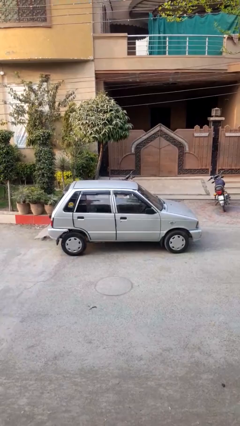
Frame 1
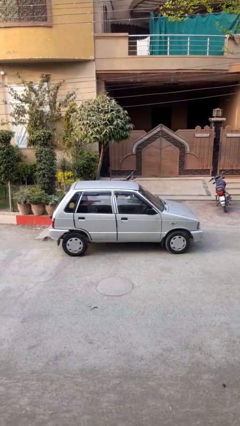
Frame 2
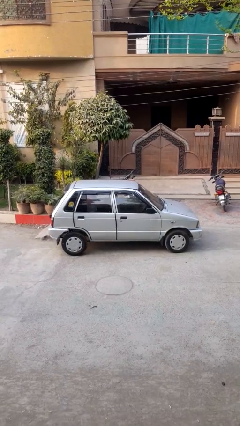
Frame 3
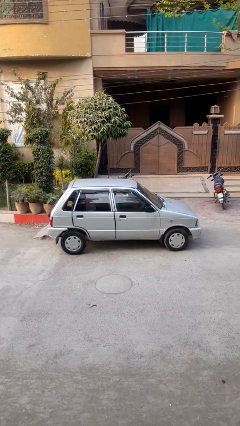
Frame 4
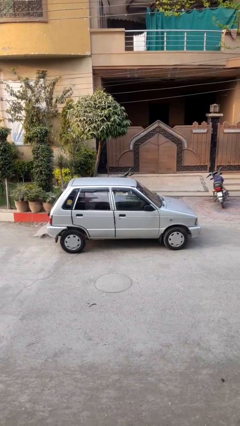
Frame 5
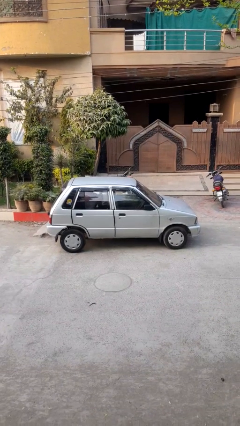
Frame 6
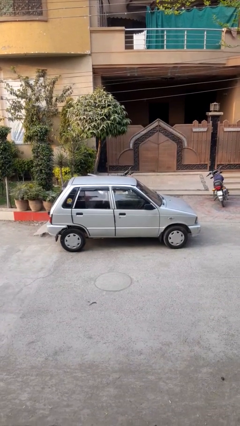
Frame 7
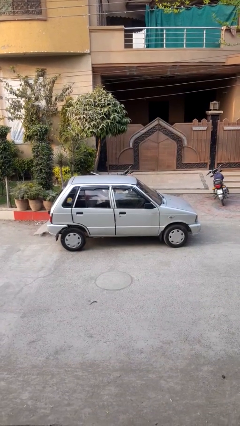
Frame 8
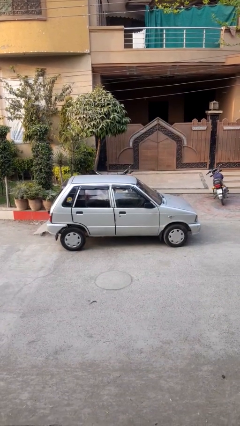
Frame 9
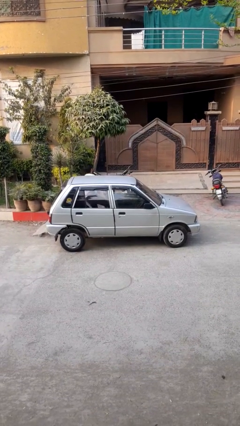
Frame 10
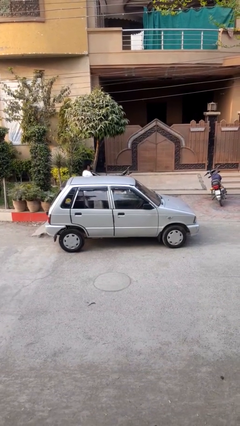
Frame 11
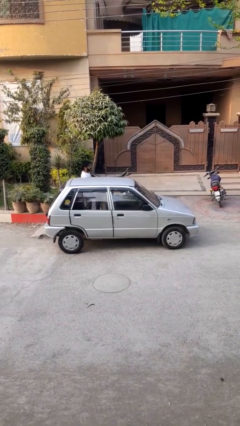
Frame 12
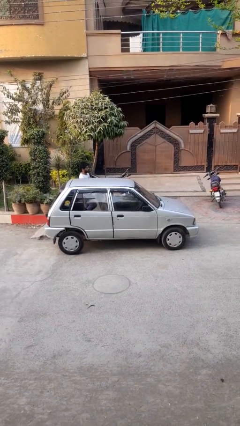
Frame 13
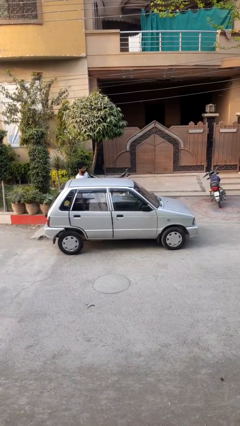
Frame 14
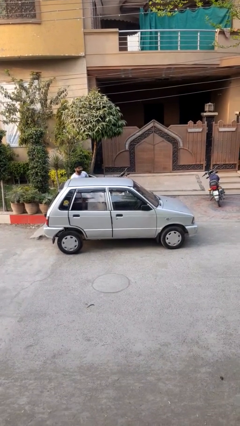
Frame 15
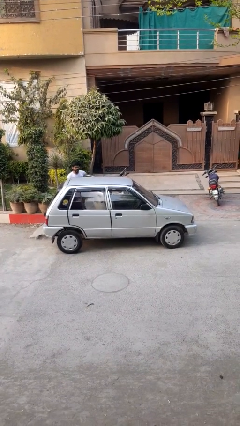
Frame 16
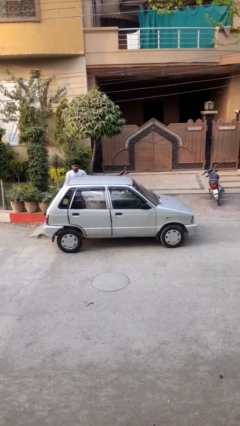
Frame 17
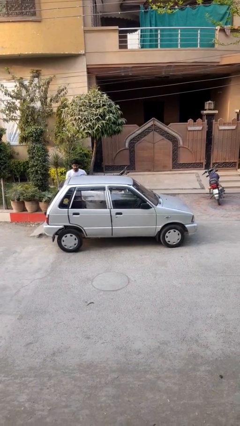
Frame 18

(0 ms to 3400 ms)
car drops off person

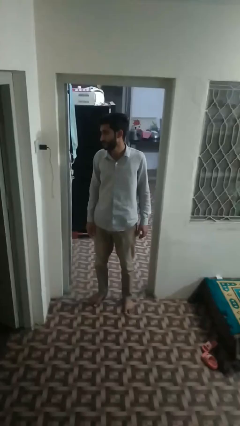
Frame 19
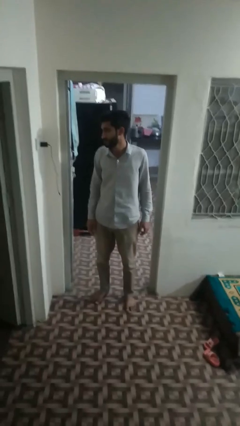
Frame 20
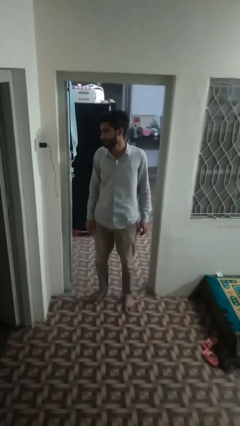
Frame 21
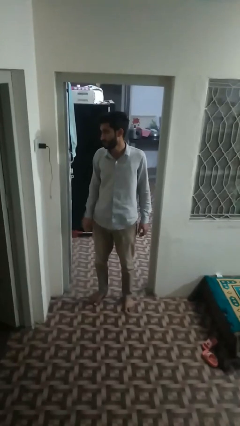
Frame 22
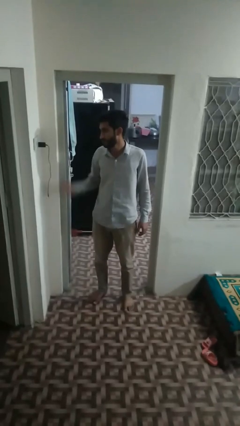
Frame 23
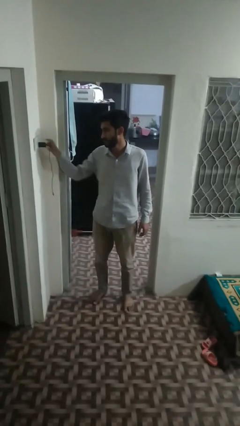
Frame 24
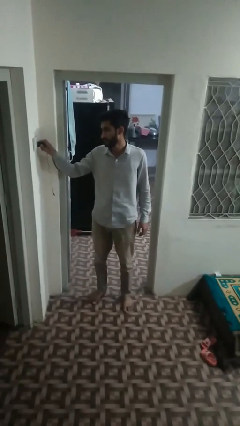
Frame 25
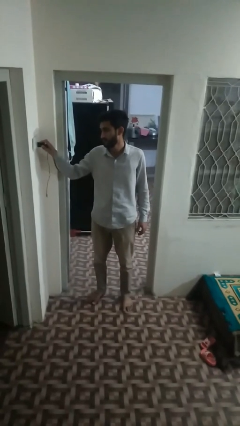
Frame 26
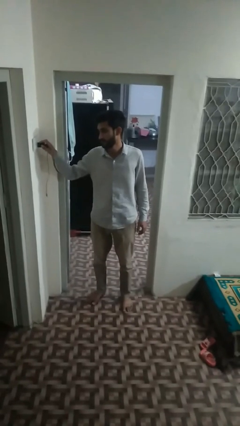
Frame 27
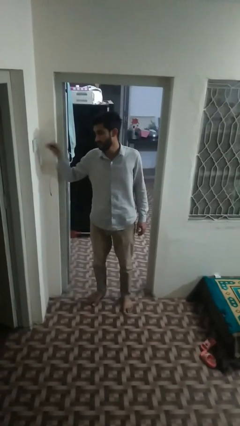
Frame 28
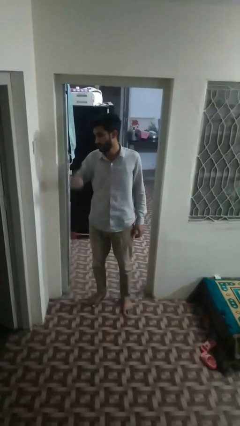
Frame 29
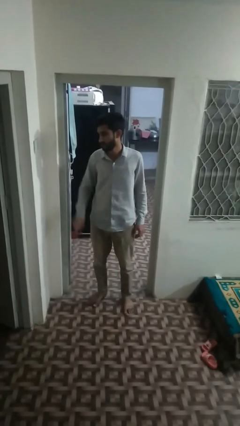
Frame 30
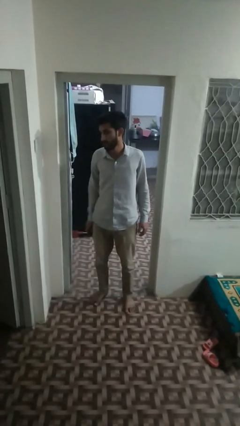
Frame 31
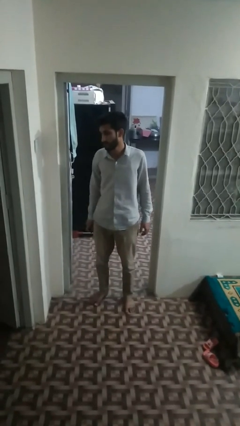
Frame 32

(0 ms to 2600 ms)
person unplugs from electrical socket

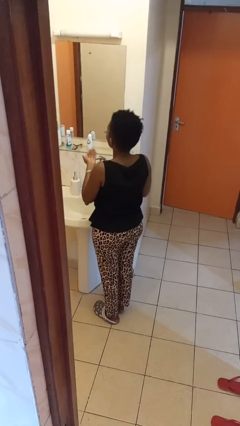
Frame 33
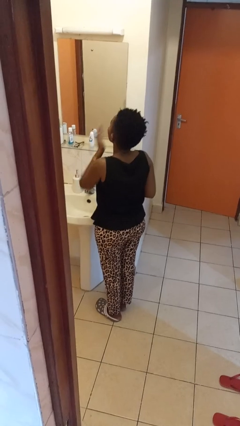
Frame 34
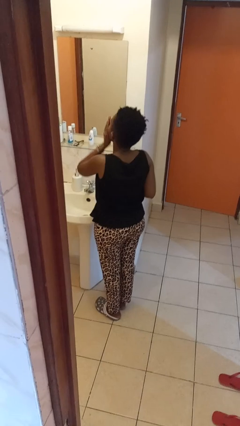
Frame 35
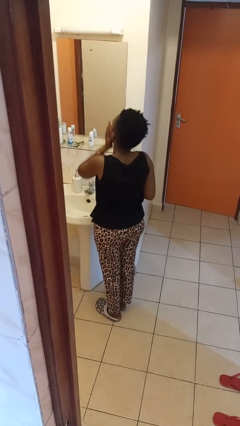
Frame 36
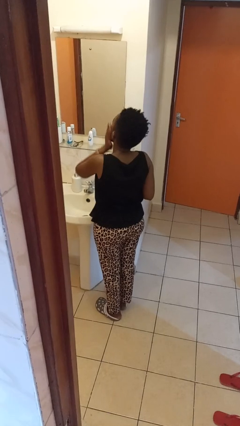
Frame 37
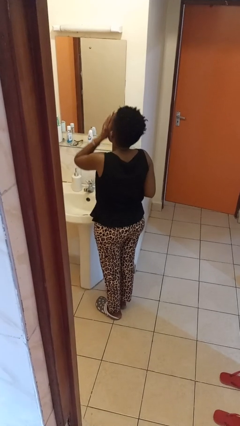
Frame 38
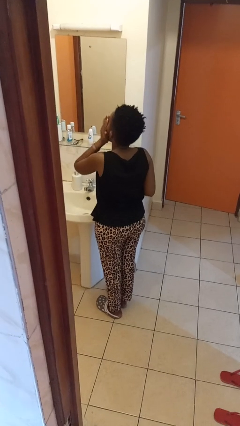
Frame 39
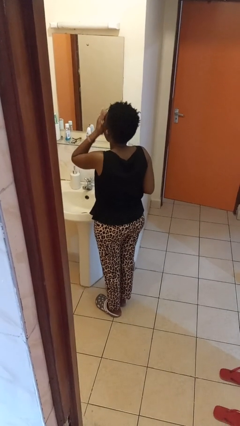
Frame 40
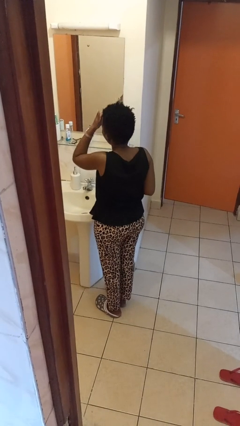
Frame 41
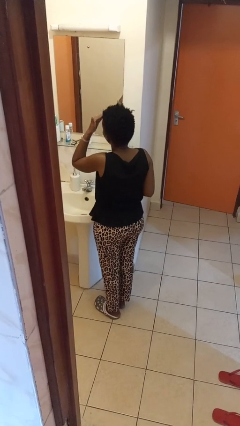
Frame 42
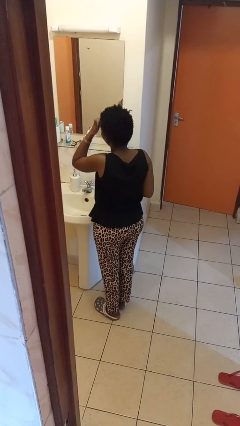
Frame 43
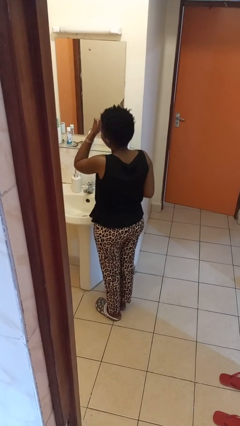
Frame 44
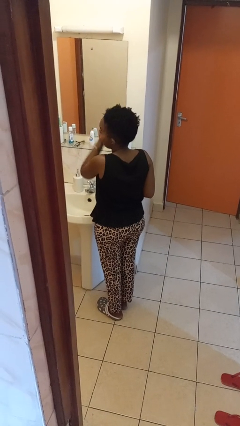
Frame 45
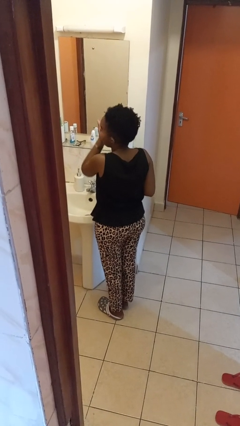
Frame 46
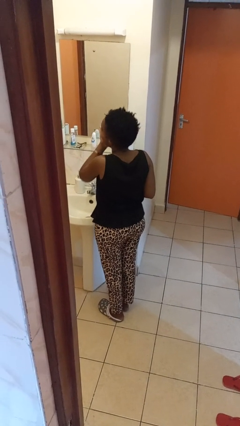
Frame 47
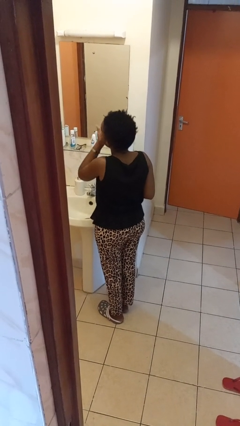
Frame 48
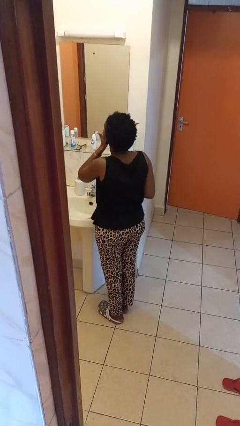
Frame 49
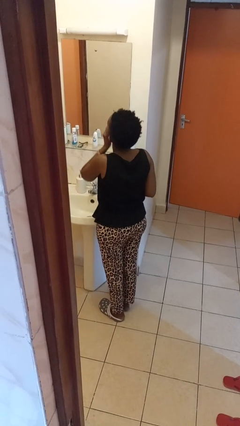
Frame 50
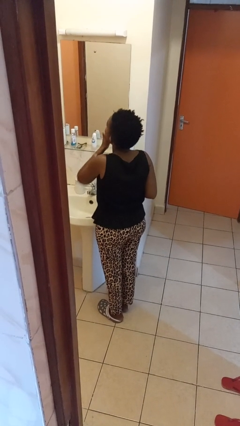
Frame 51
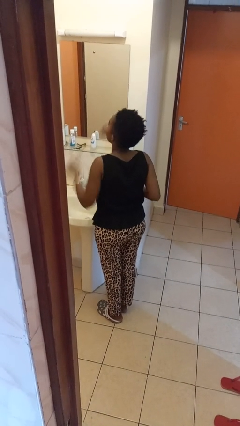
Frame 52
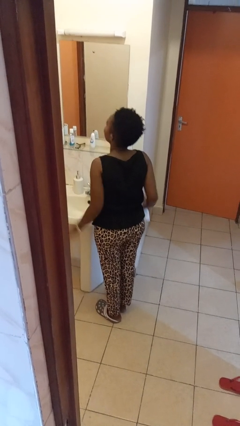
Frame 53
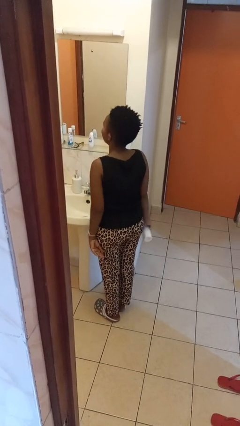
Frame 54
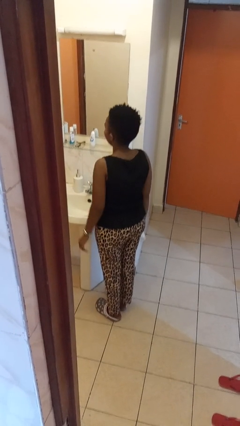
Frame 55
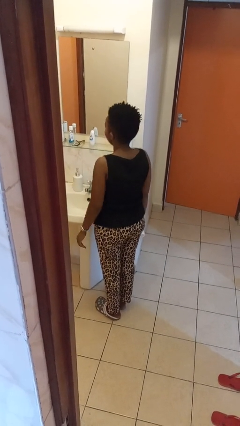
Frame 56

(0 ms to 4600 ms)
person applies facial moisturizer

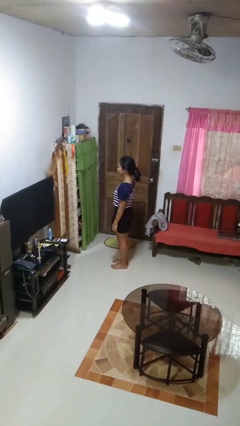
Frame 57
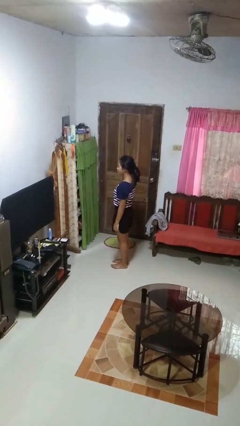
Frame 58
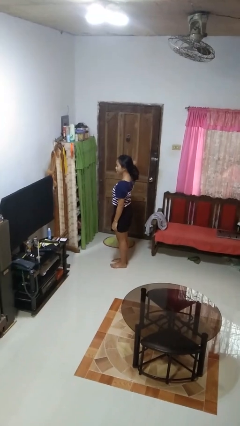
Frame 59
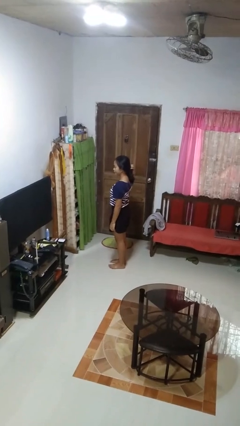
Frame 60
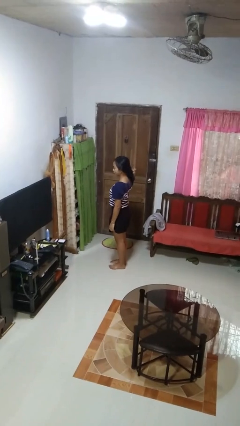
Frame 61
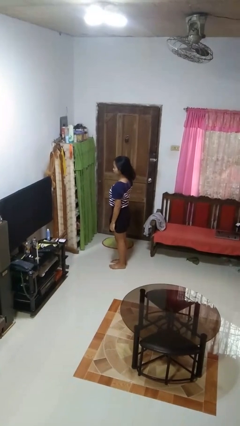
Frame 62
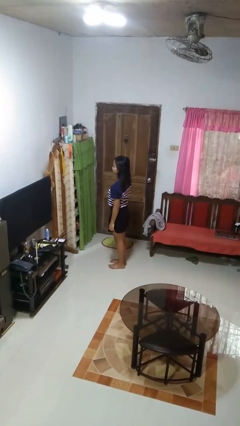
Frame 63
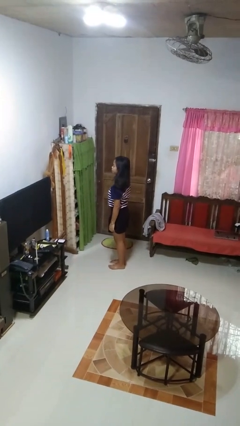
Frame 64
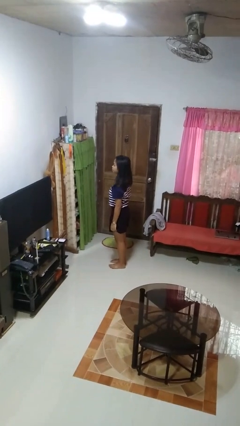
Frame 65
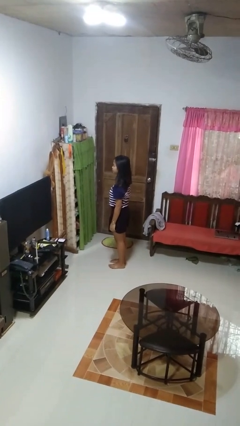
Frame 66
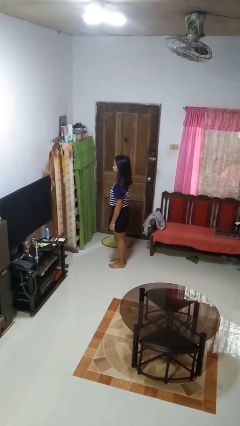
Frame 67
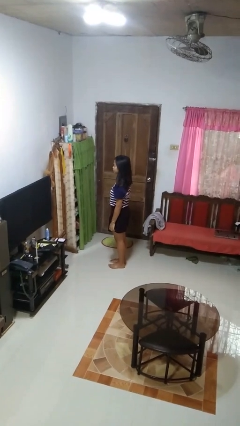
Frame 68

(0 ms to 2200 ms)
person takes off hairtie

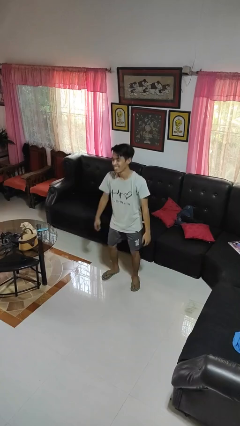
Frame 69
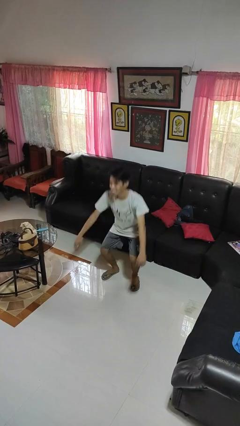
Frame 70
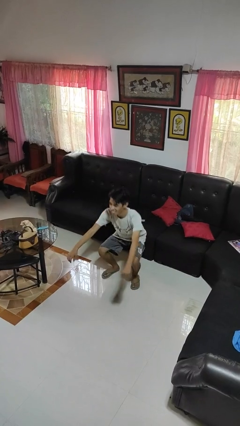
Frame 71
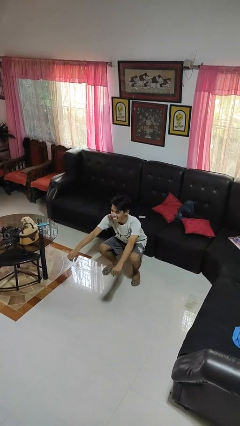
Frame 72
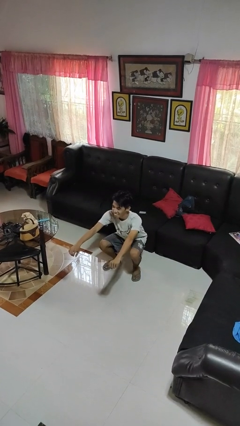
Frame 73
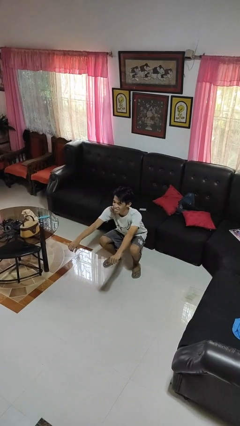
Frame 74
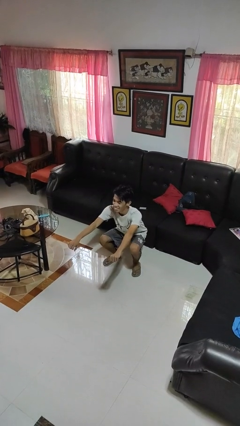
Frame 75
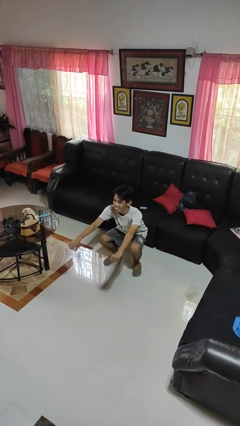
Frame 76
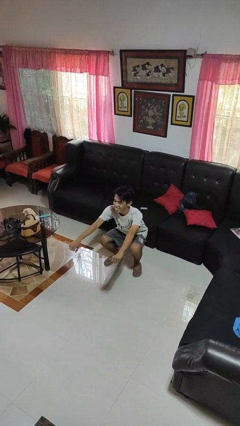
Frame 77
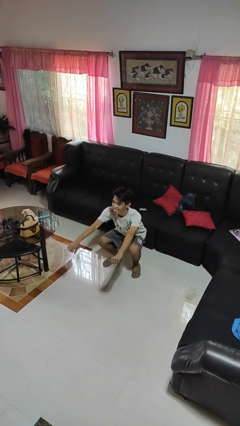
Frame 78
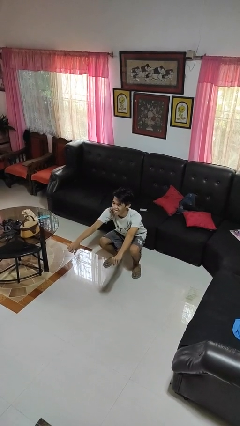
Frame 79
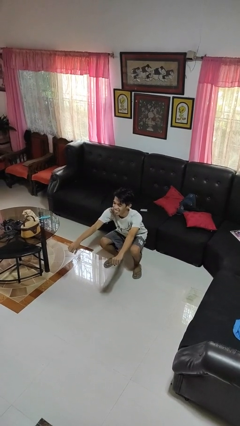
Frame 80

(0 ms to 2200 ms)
person squats

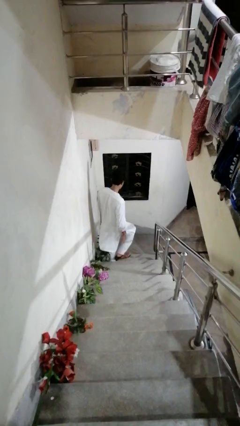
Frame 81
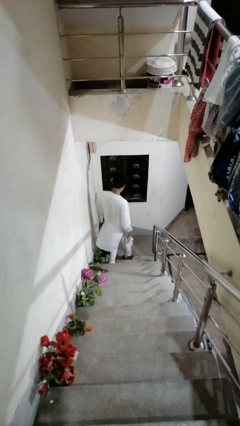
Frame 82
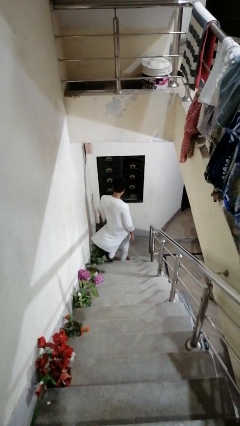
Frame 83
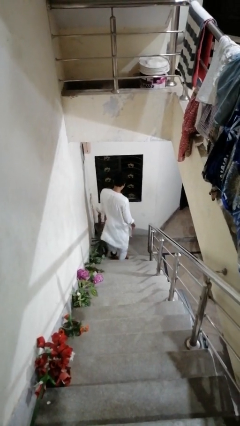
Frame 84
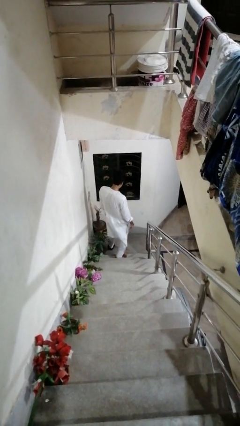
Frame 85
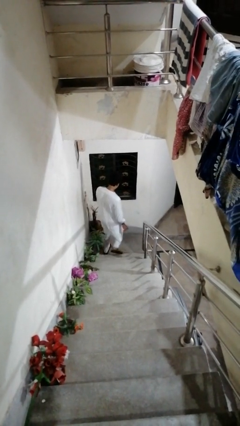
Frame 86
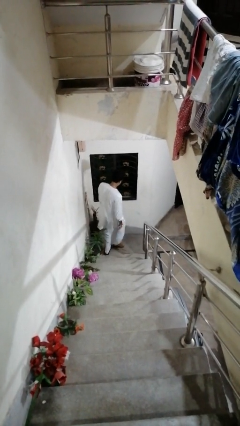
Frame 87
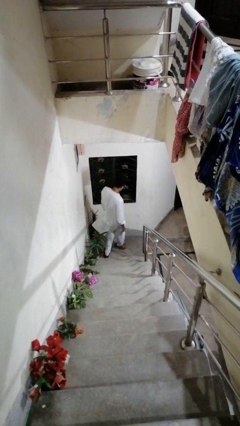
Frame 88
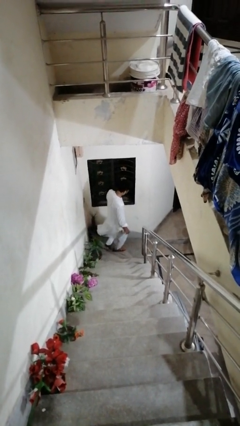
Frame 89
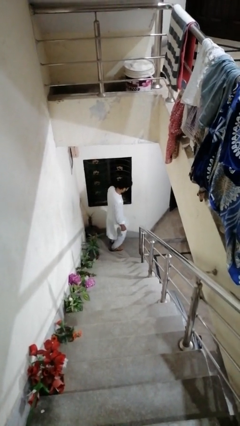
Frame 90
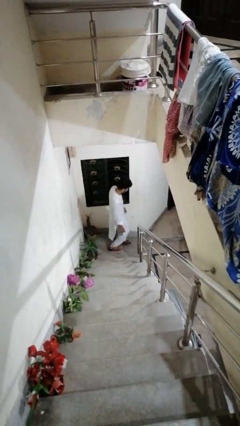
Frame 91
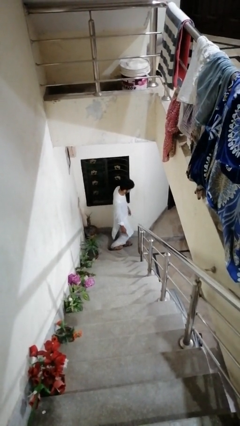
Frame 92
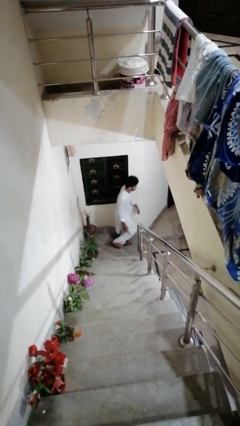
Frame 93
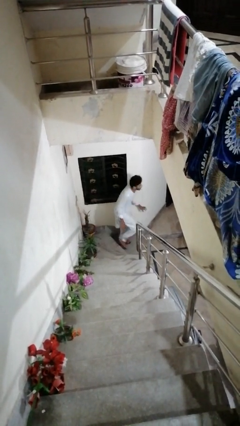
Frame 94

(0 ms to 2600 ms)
person climbs down stairs
